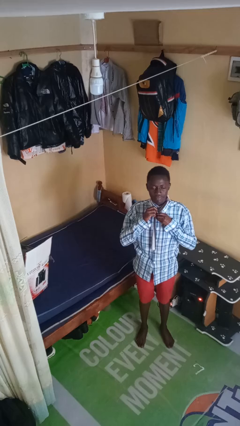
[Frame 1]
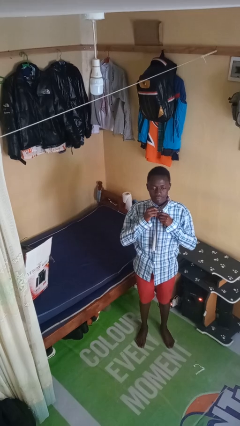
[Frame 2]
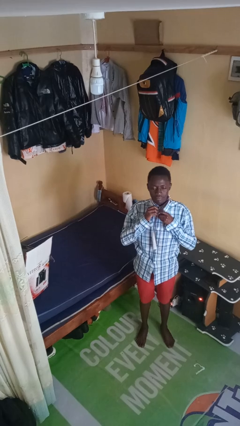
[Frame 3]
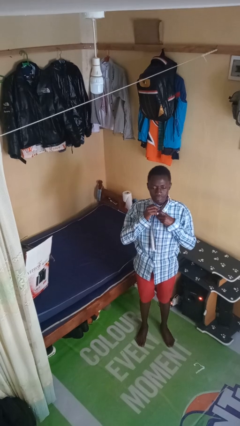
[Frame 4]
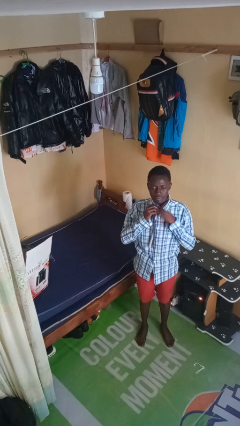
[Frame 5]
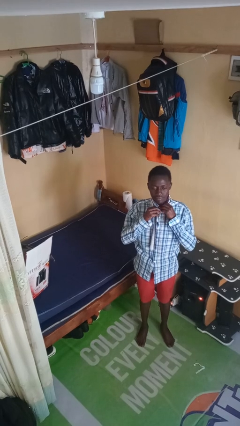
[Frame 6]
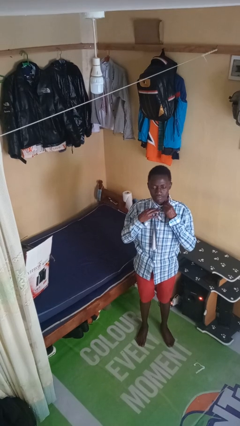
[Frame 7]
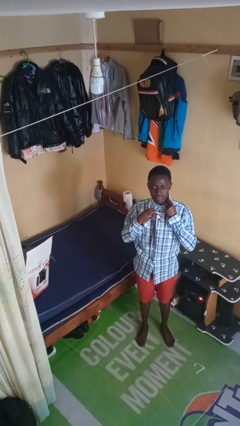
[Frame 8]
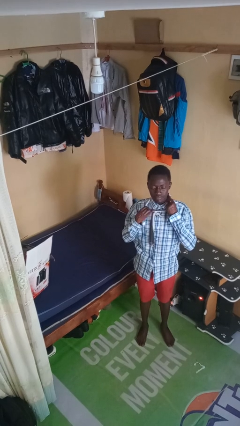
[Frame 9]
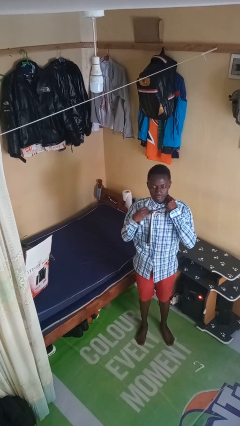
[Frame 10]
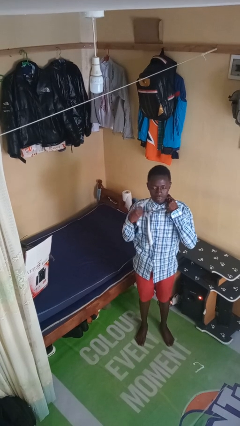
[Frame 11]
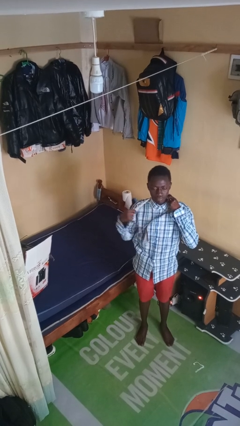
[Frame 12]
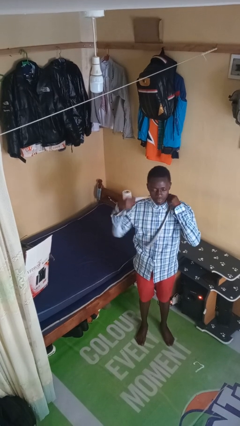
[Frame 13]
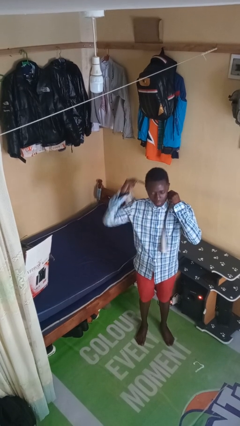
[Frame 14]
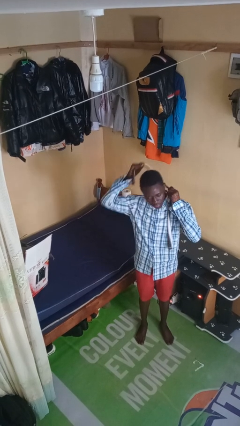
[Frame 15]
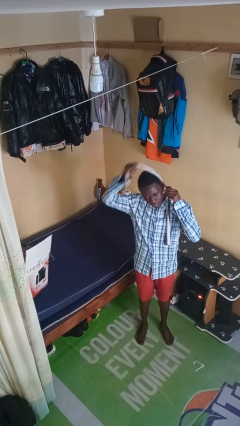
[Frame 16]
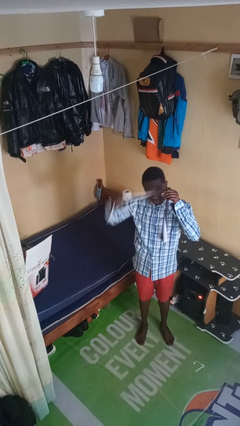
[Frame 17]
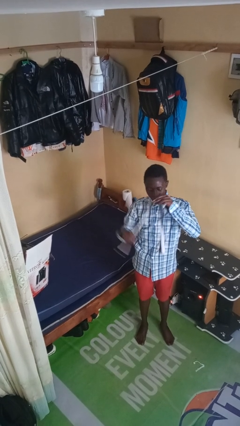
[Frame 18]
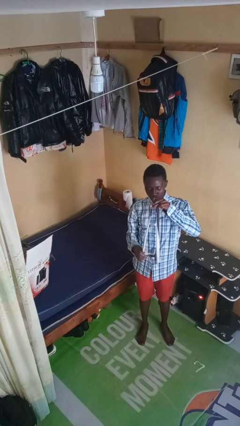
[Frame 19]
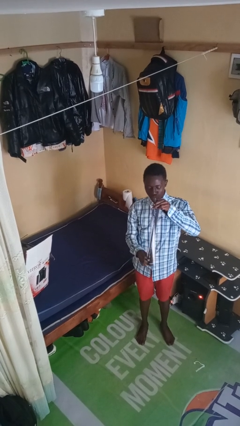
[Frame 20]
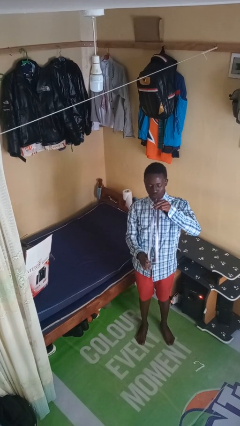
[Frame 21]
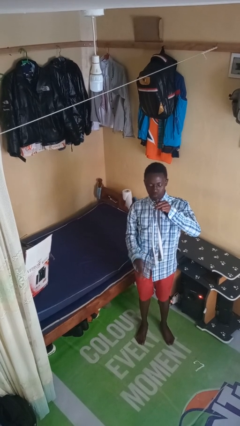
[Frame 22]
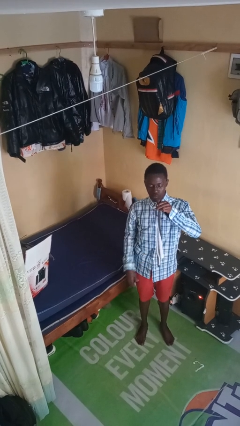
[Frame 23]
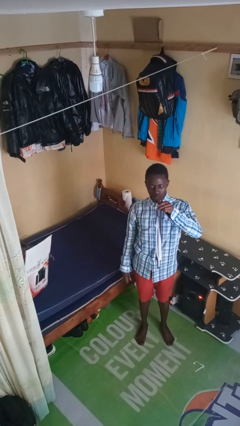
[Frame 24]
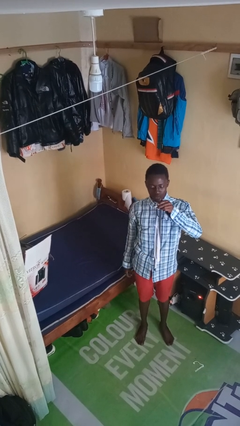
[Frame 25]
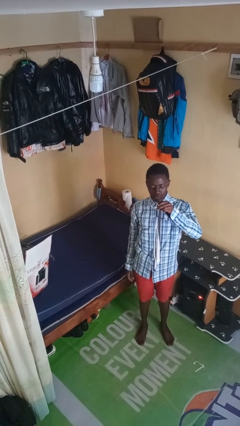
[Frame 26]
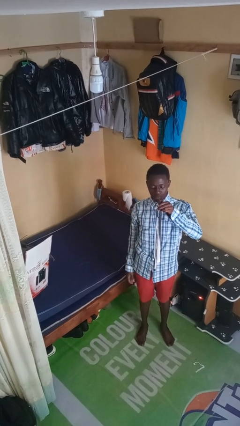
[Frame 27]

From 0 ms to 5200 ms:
person takes off necktie

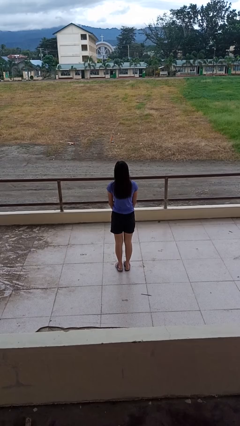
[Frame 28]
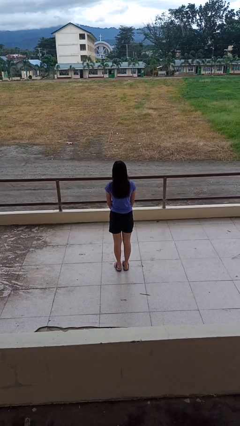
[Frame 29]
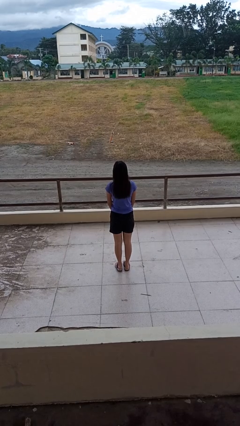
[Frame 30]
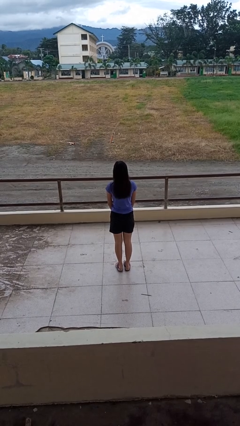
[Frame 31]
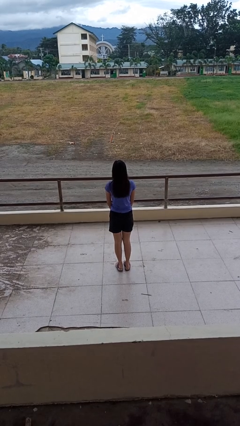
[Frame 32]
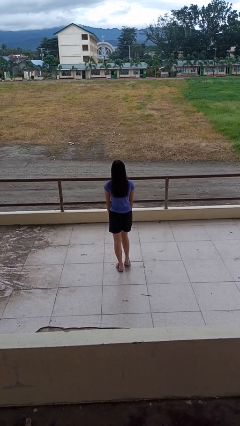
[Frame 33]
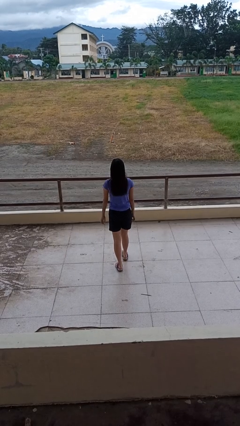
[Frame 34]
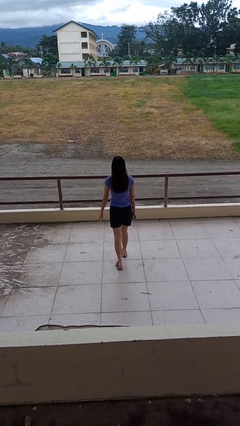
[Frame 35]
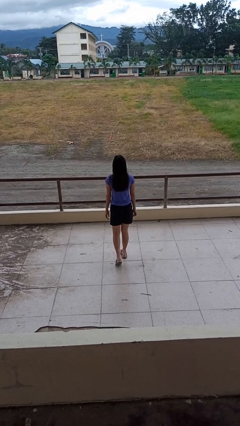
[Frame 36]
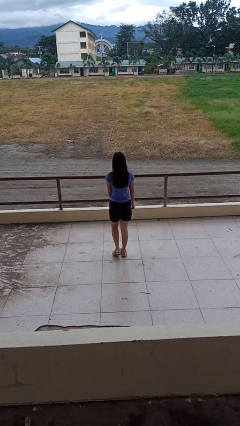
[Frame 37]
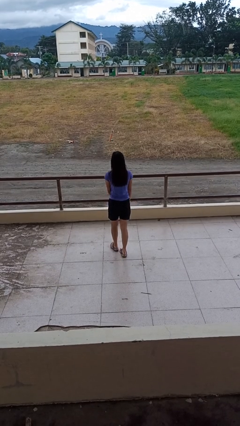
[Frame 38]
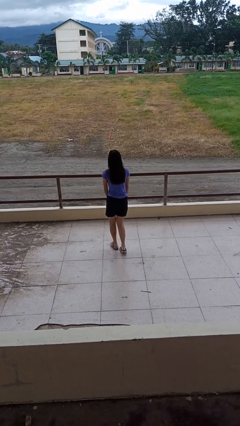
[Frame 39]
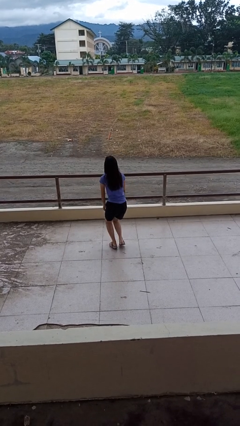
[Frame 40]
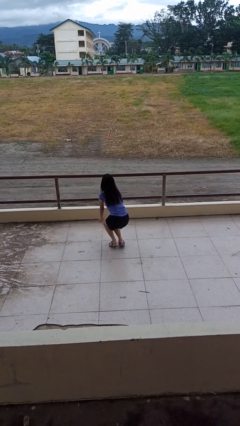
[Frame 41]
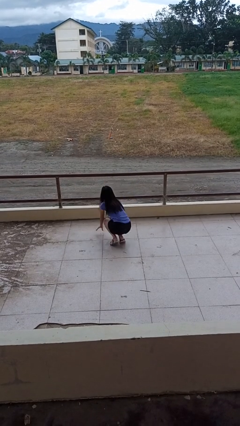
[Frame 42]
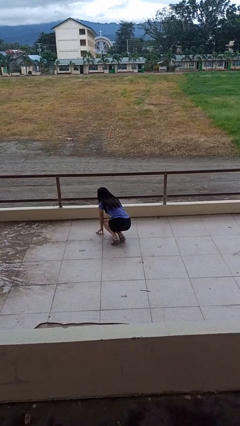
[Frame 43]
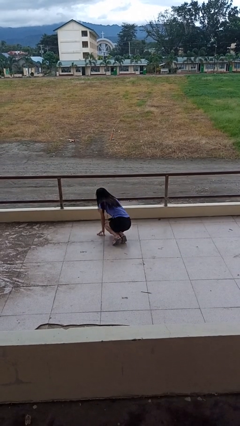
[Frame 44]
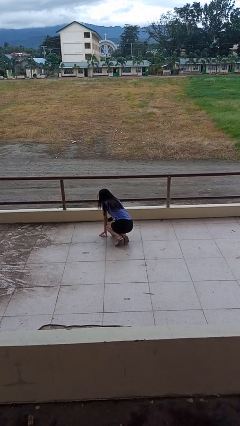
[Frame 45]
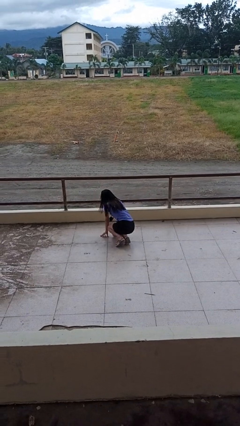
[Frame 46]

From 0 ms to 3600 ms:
person trips on object on floor

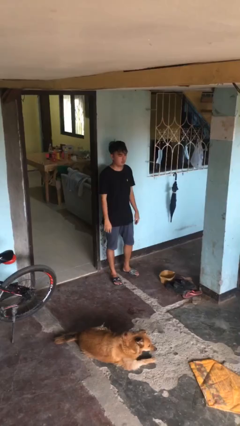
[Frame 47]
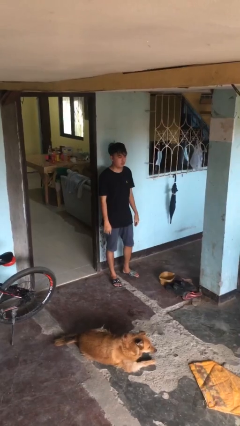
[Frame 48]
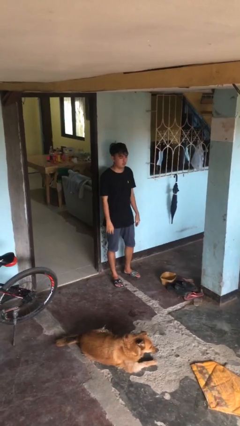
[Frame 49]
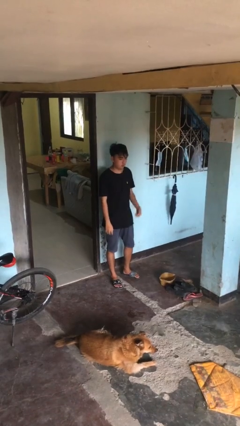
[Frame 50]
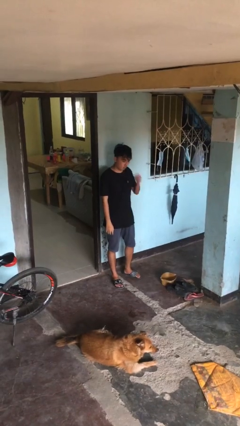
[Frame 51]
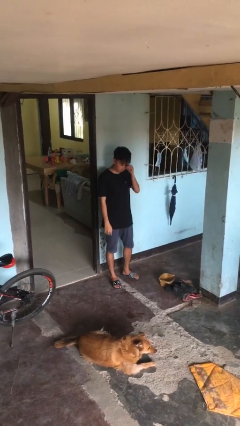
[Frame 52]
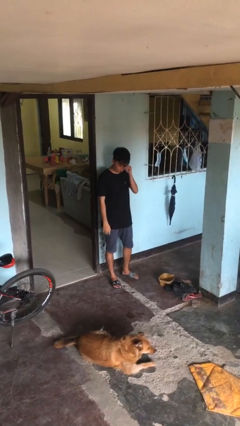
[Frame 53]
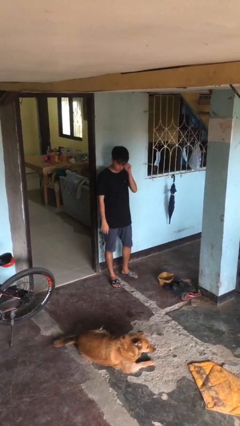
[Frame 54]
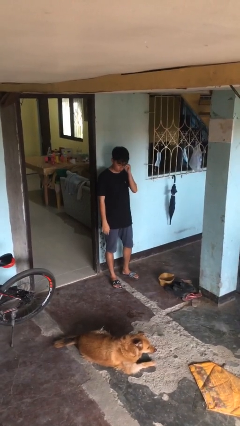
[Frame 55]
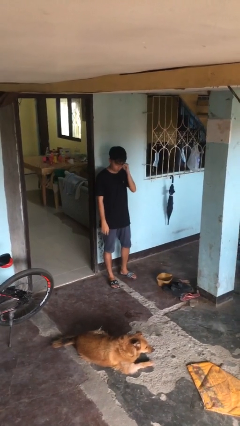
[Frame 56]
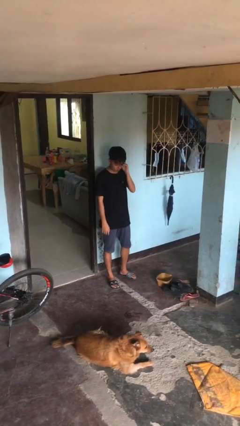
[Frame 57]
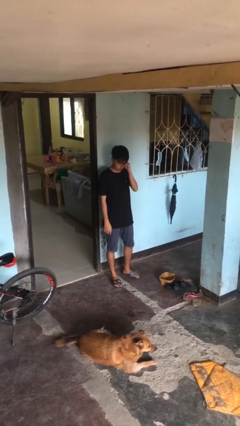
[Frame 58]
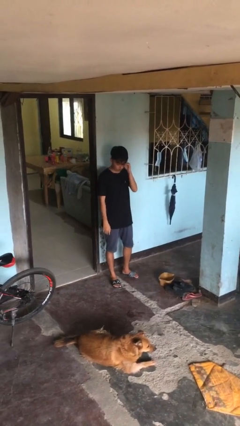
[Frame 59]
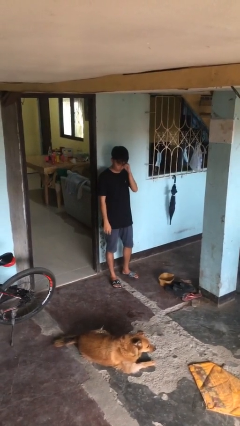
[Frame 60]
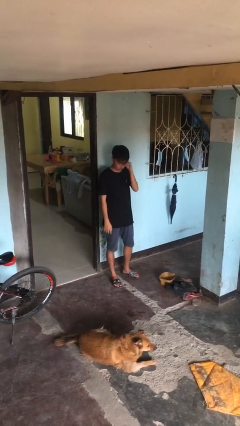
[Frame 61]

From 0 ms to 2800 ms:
person rubs eyes

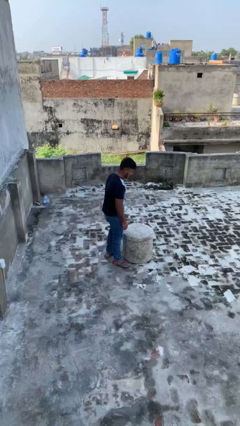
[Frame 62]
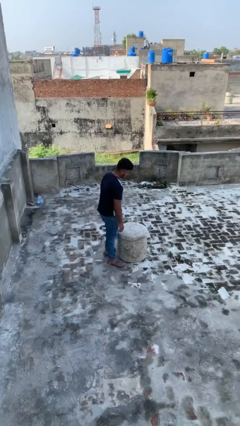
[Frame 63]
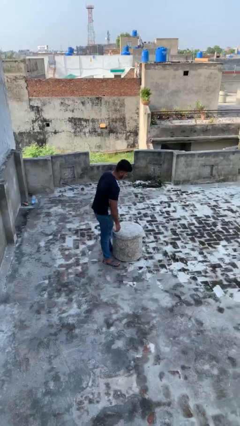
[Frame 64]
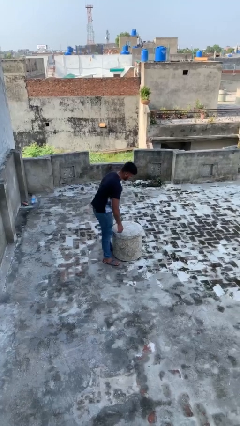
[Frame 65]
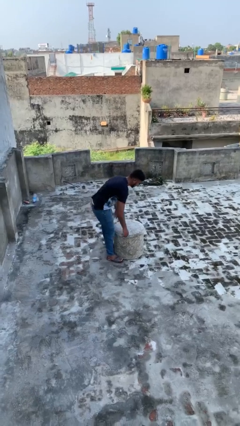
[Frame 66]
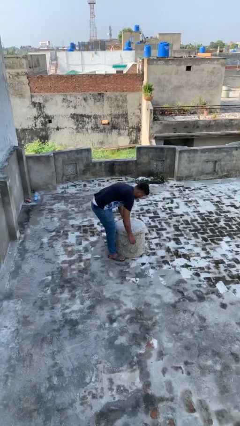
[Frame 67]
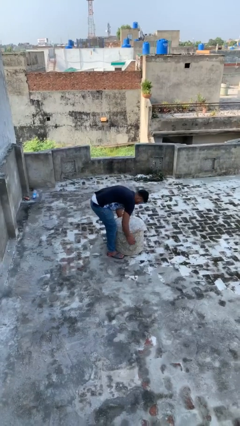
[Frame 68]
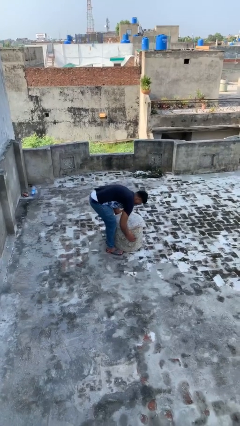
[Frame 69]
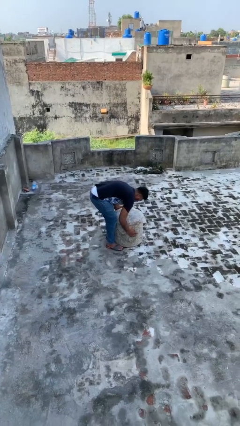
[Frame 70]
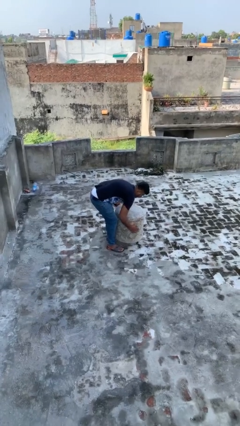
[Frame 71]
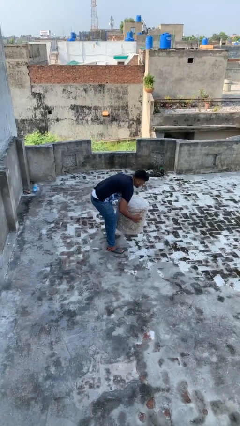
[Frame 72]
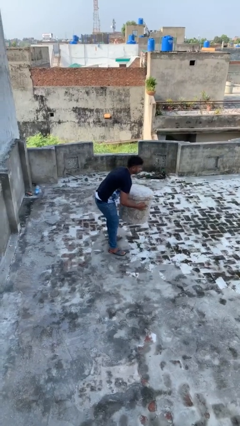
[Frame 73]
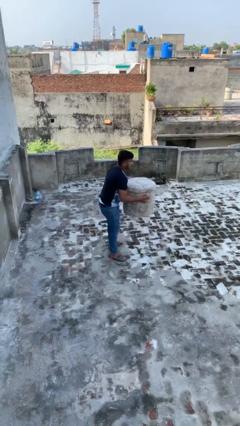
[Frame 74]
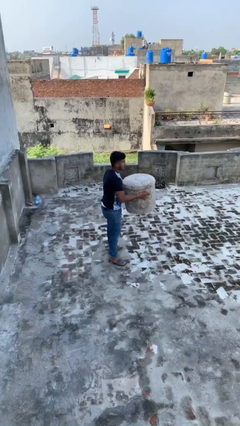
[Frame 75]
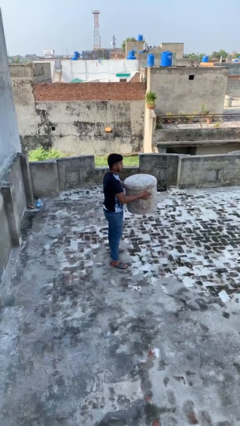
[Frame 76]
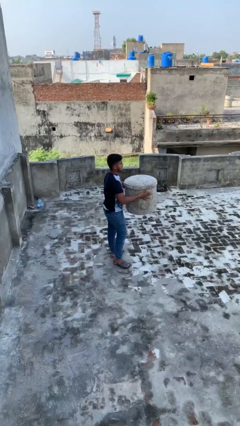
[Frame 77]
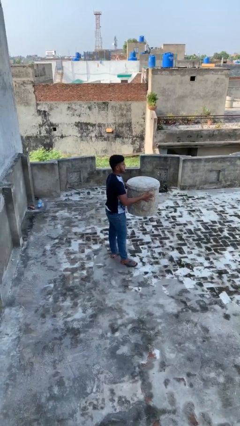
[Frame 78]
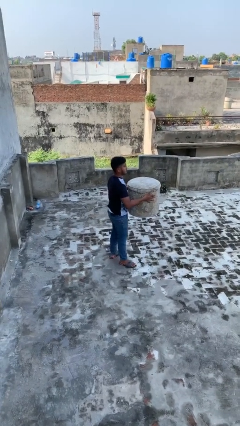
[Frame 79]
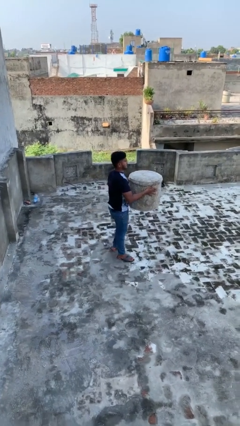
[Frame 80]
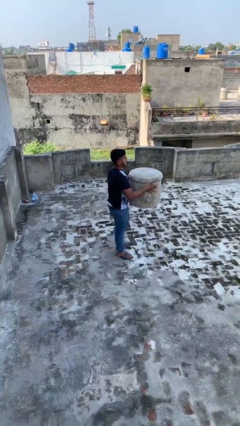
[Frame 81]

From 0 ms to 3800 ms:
person picks up object from floor

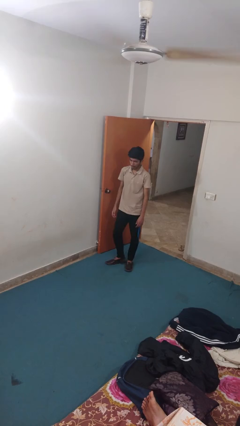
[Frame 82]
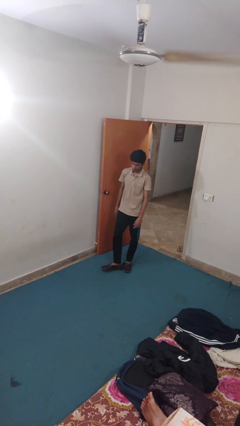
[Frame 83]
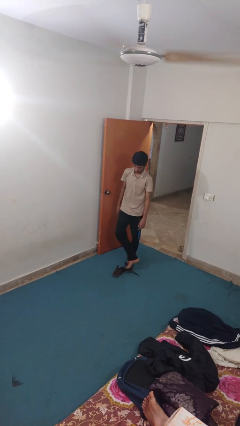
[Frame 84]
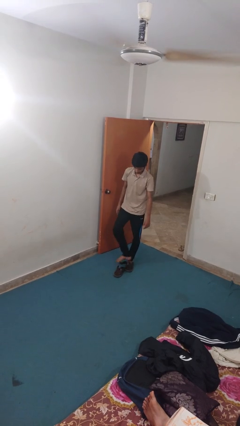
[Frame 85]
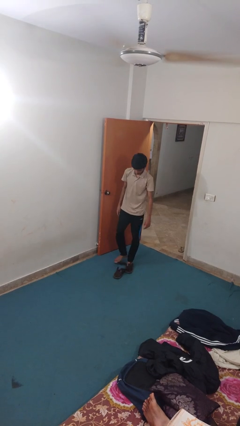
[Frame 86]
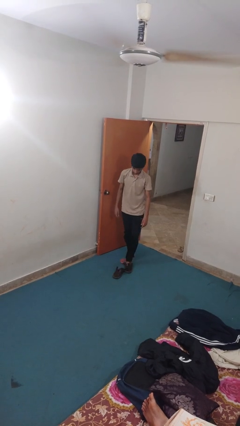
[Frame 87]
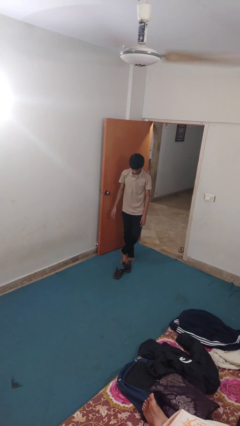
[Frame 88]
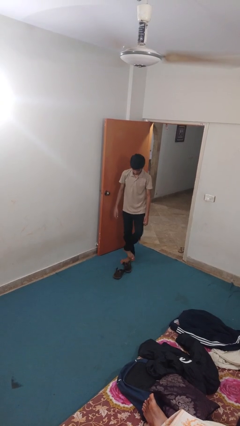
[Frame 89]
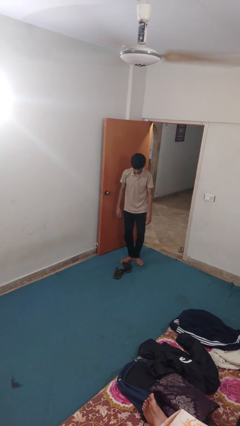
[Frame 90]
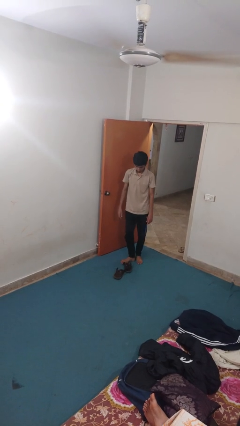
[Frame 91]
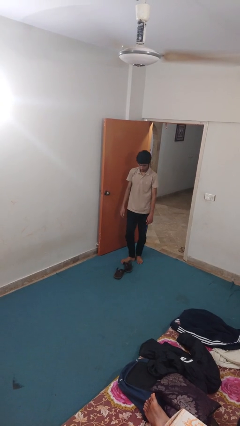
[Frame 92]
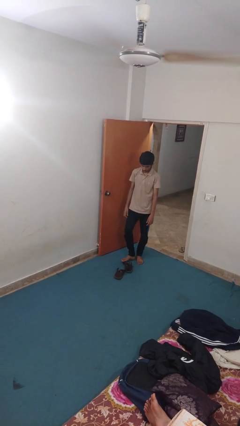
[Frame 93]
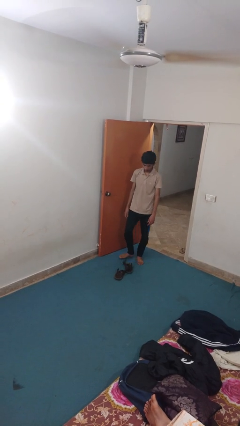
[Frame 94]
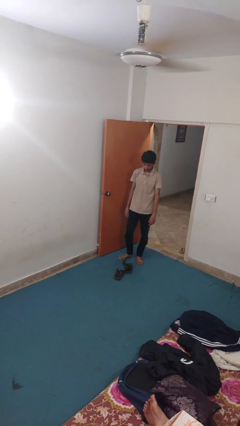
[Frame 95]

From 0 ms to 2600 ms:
person takes off shoes
